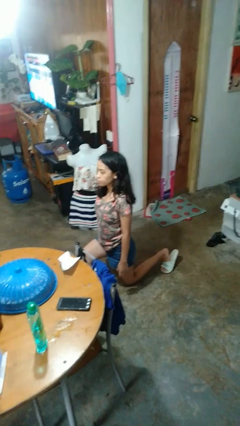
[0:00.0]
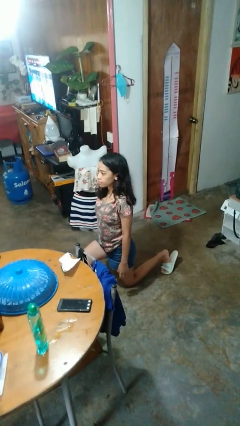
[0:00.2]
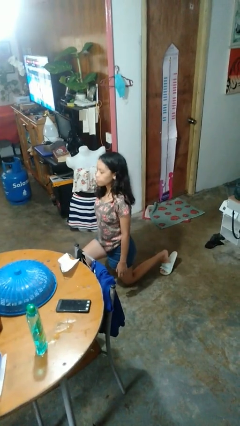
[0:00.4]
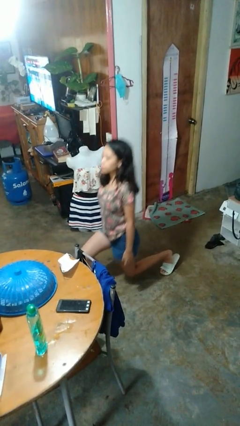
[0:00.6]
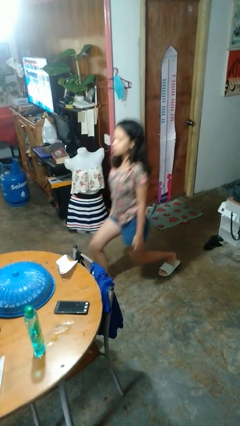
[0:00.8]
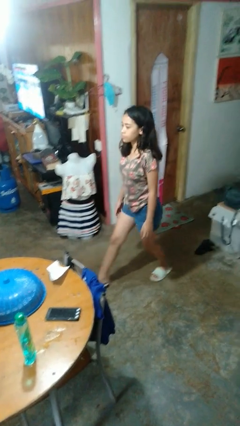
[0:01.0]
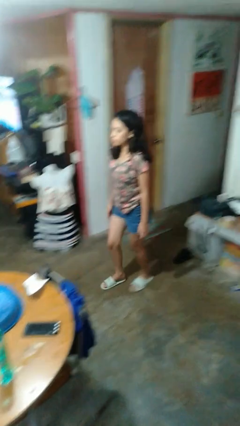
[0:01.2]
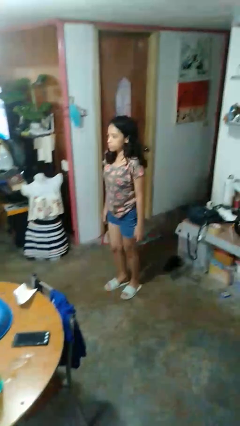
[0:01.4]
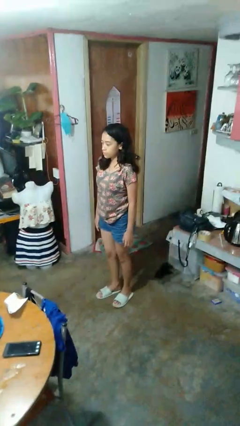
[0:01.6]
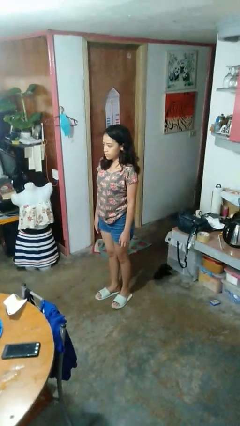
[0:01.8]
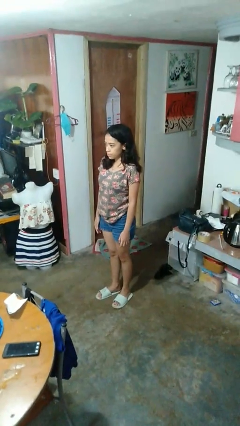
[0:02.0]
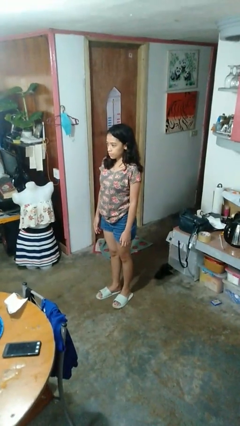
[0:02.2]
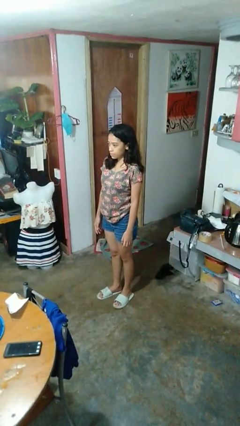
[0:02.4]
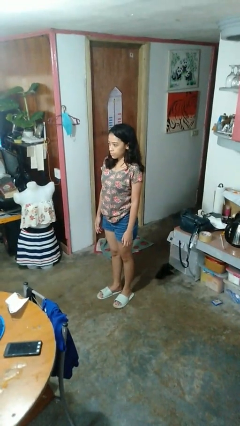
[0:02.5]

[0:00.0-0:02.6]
person stands up from floor

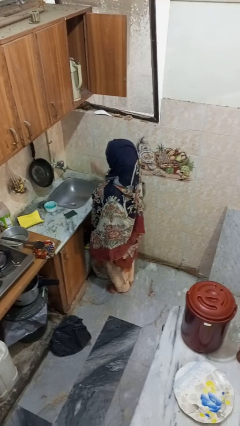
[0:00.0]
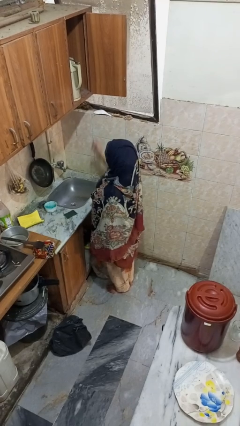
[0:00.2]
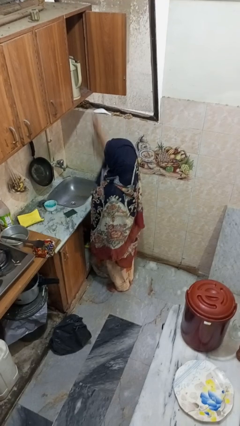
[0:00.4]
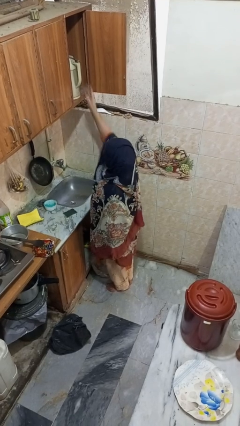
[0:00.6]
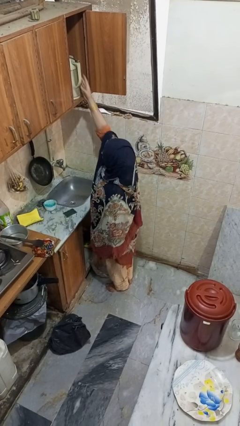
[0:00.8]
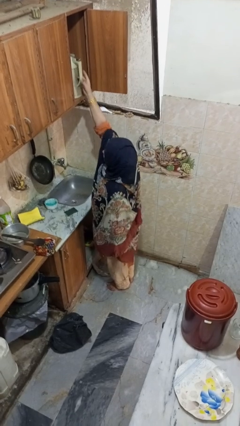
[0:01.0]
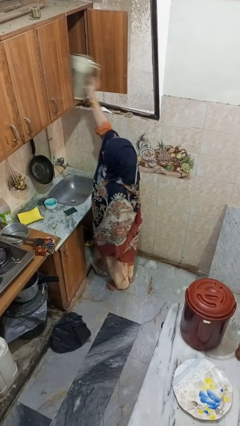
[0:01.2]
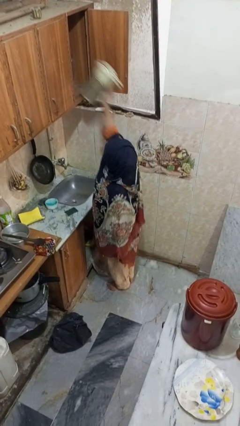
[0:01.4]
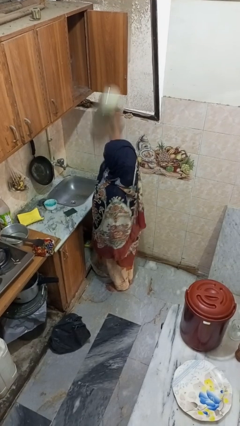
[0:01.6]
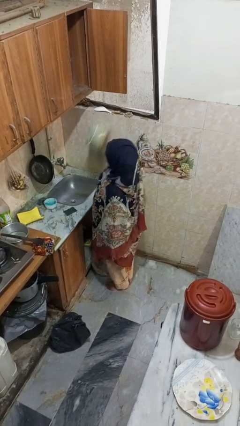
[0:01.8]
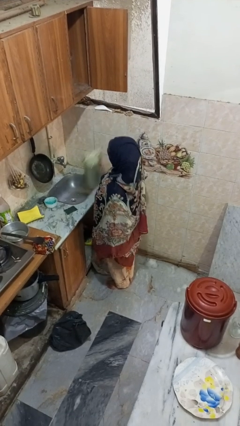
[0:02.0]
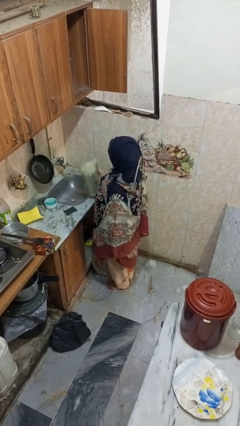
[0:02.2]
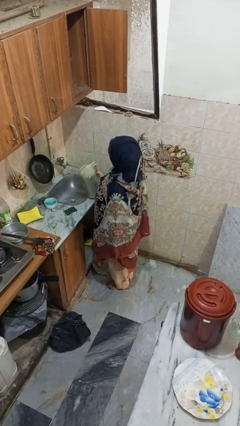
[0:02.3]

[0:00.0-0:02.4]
person puts object in cabinet

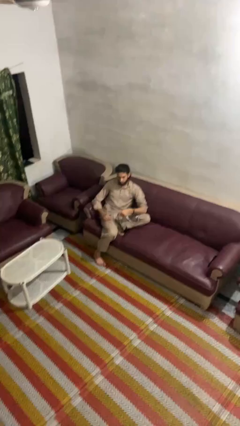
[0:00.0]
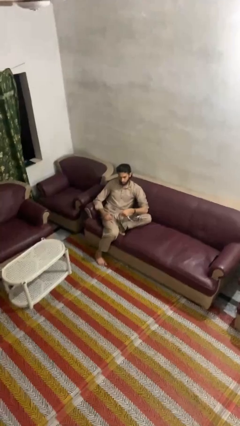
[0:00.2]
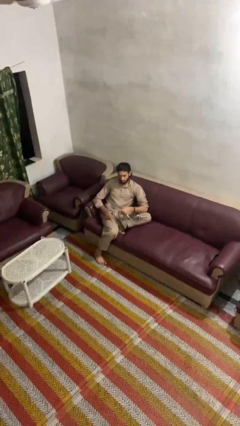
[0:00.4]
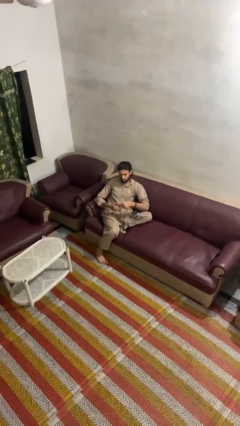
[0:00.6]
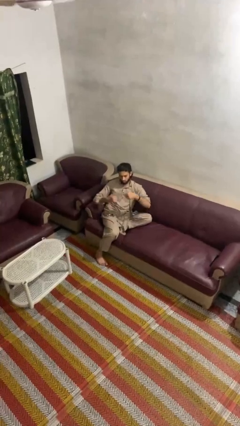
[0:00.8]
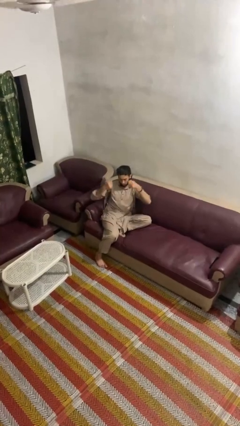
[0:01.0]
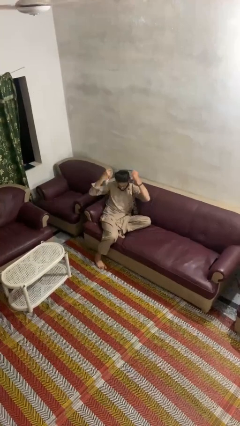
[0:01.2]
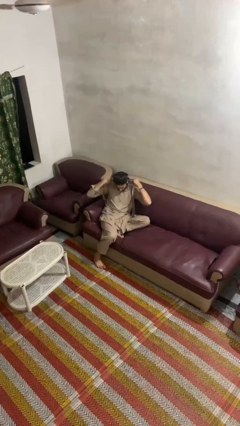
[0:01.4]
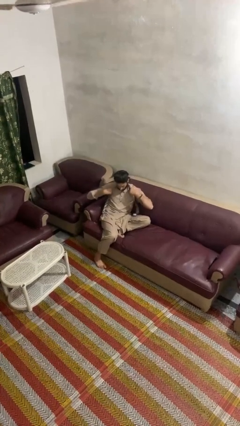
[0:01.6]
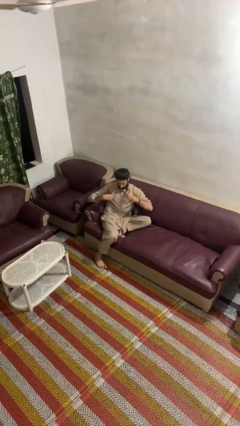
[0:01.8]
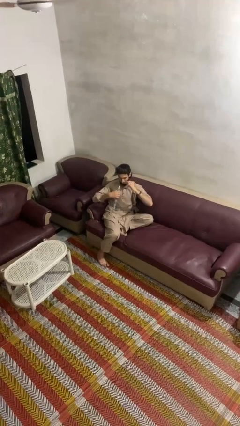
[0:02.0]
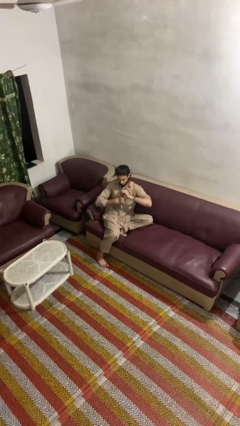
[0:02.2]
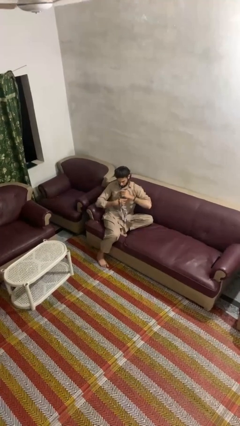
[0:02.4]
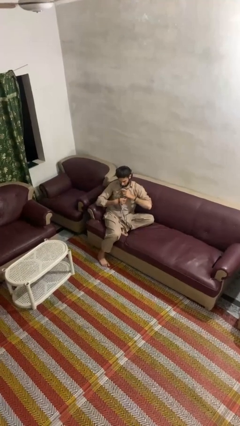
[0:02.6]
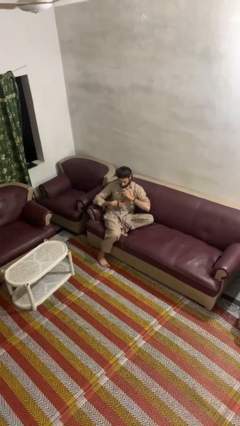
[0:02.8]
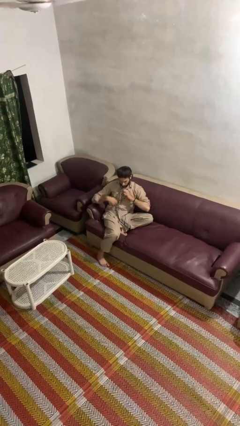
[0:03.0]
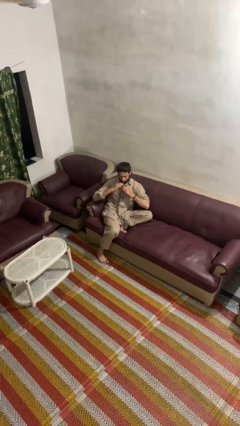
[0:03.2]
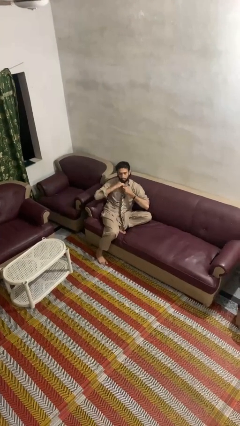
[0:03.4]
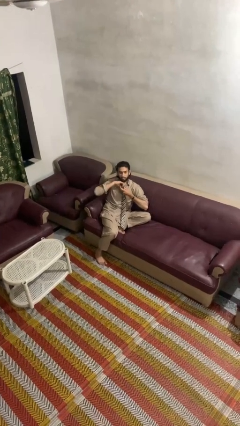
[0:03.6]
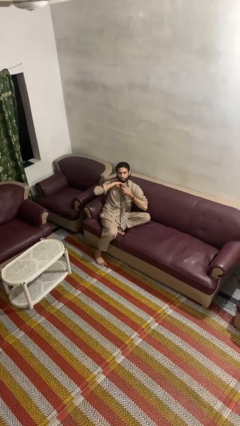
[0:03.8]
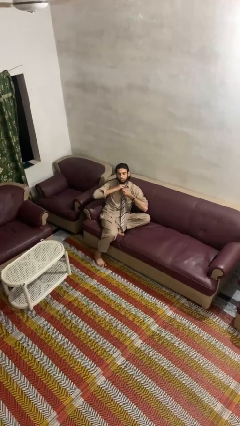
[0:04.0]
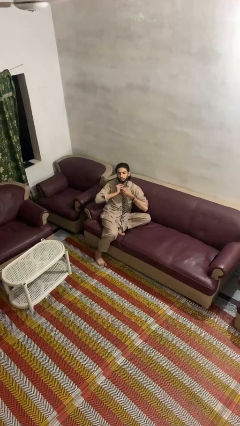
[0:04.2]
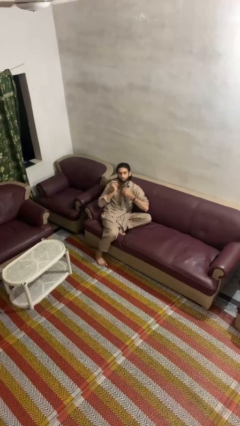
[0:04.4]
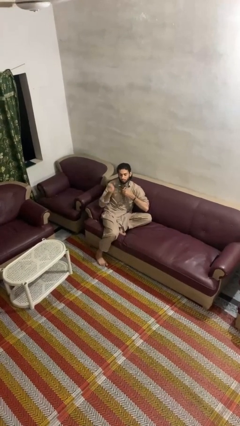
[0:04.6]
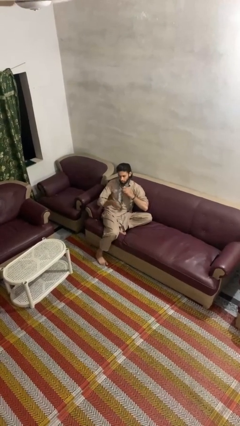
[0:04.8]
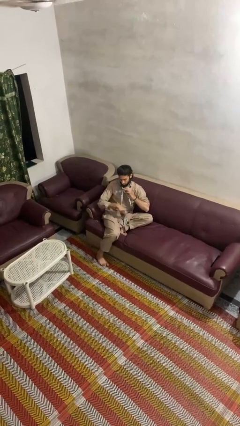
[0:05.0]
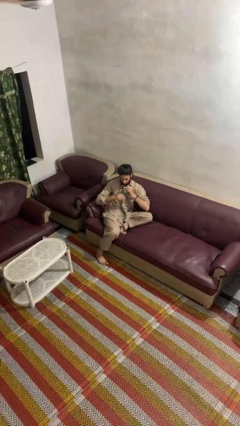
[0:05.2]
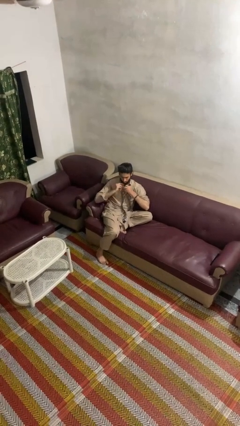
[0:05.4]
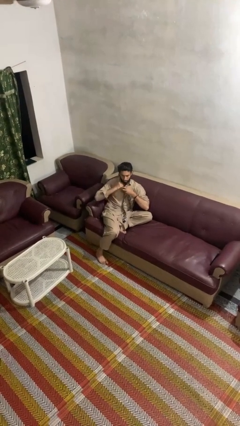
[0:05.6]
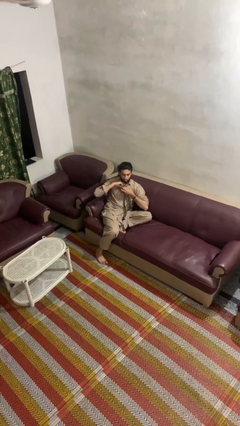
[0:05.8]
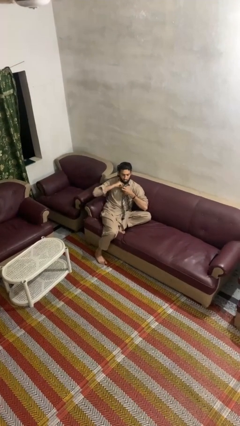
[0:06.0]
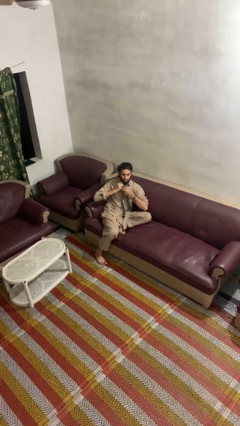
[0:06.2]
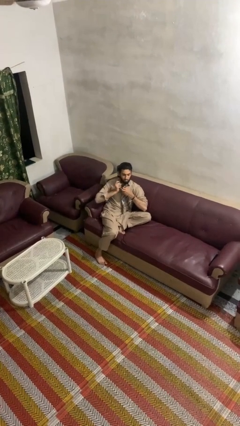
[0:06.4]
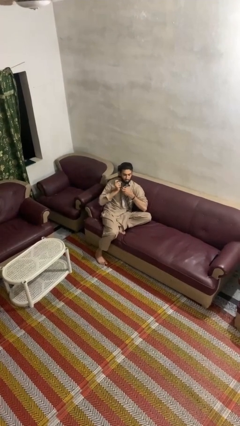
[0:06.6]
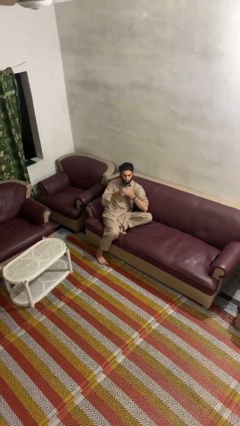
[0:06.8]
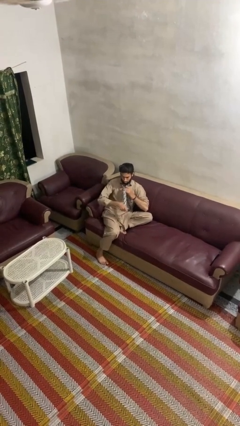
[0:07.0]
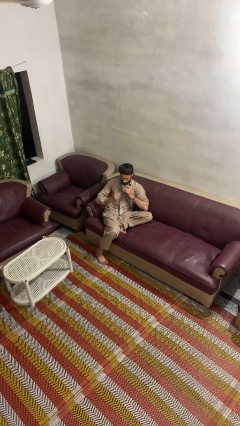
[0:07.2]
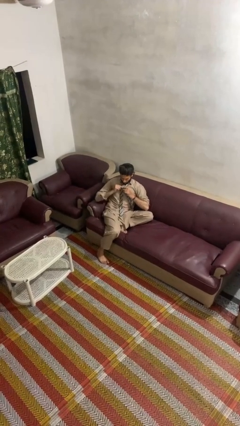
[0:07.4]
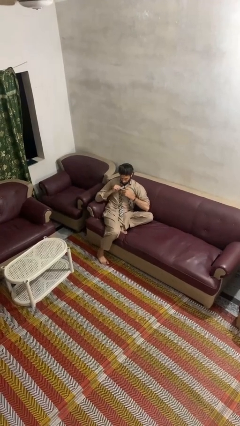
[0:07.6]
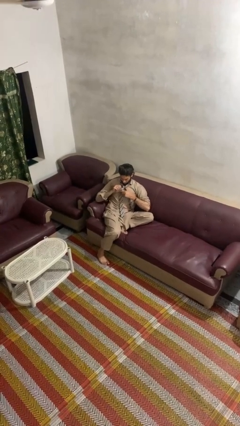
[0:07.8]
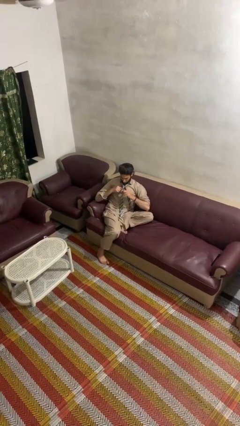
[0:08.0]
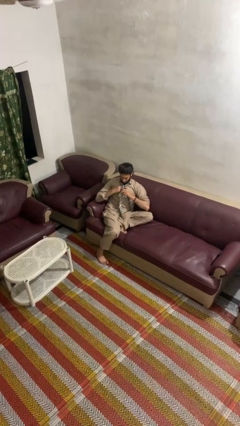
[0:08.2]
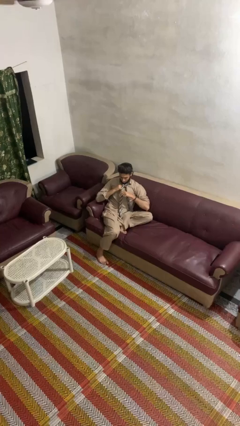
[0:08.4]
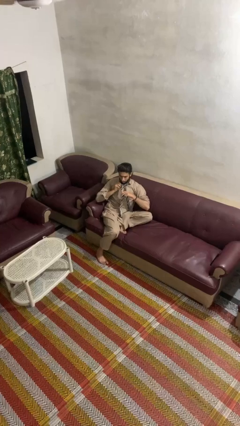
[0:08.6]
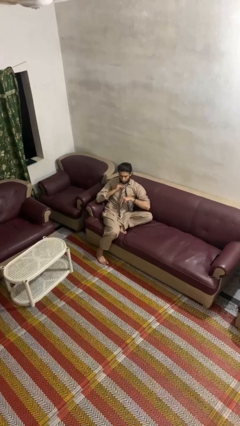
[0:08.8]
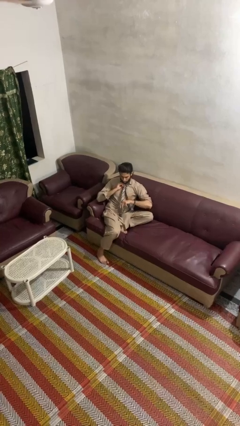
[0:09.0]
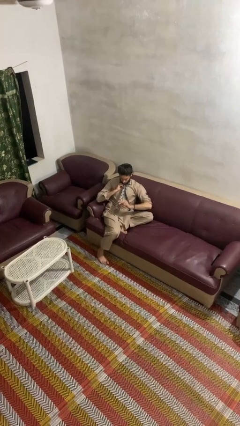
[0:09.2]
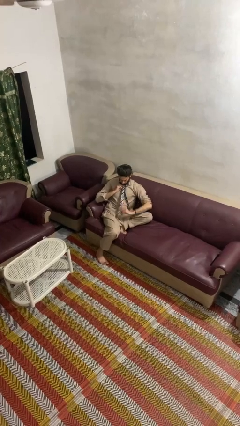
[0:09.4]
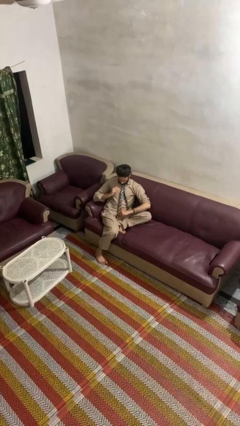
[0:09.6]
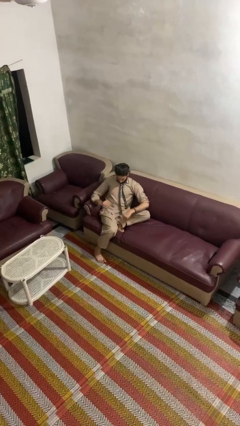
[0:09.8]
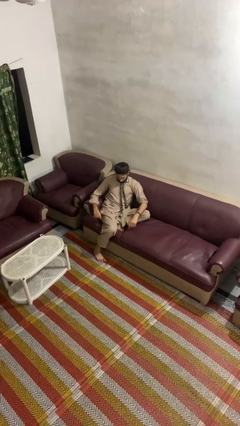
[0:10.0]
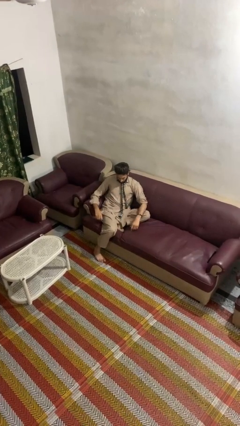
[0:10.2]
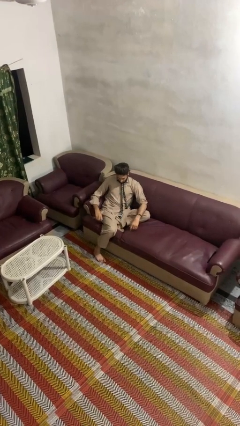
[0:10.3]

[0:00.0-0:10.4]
person puts on necktie

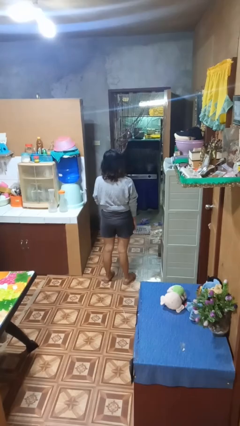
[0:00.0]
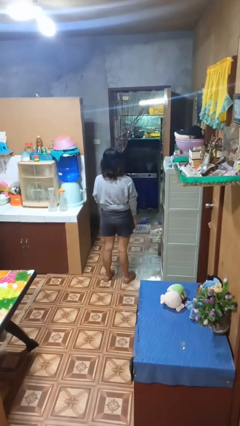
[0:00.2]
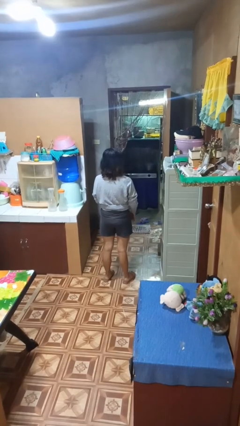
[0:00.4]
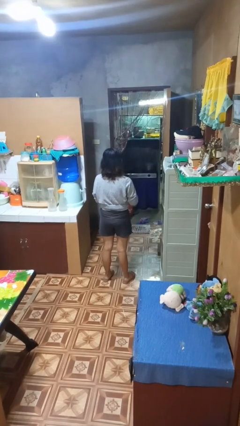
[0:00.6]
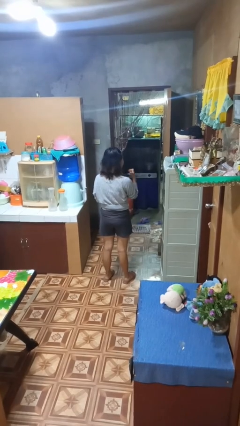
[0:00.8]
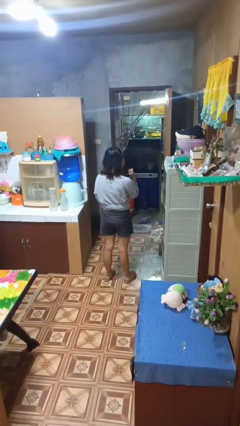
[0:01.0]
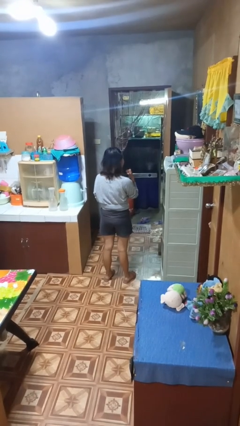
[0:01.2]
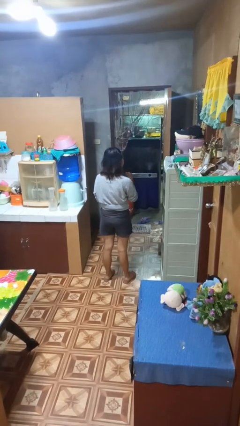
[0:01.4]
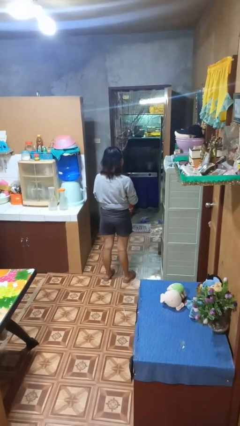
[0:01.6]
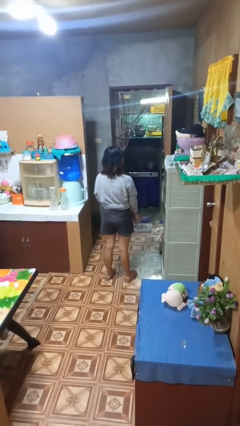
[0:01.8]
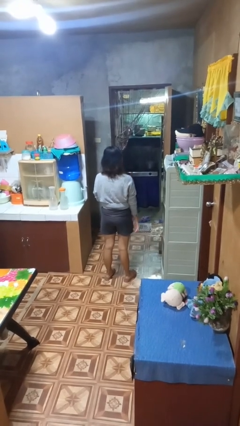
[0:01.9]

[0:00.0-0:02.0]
person gestures behind me
